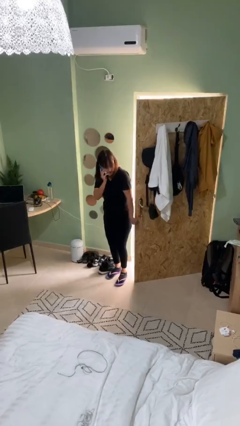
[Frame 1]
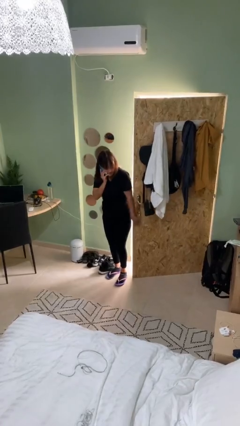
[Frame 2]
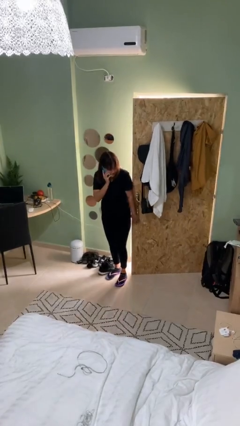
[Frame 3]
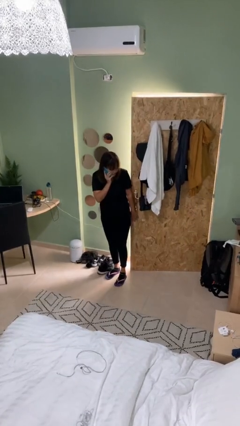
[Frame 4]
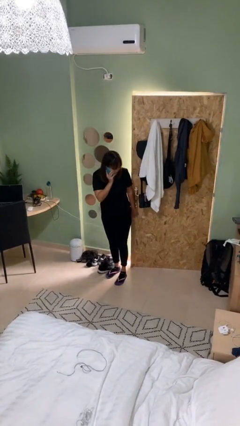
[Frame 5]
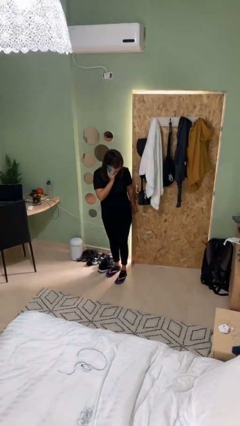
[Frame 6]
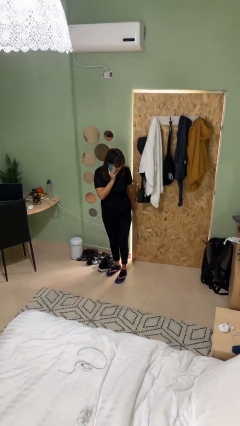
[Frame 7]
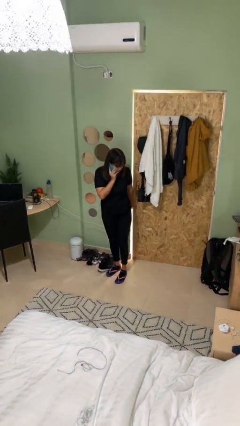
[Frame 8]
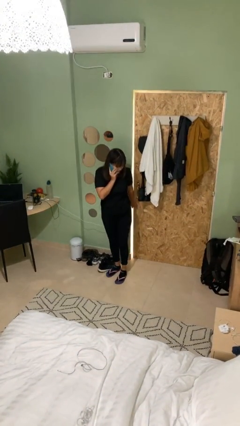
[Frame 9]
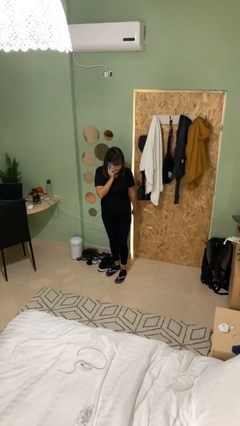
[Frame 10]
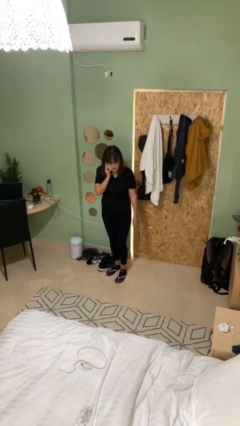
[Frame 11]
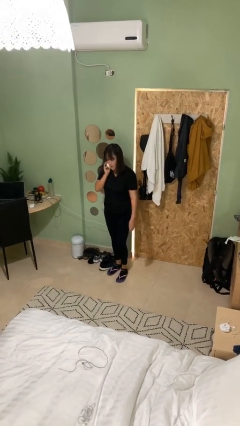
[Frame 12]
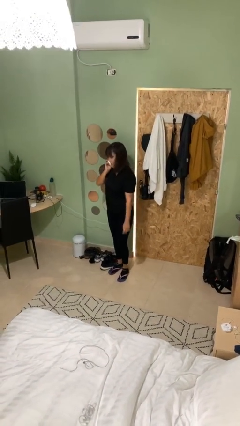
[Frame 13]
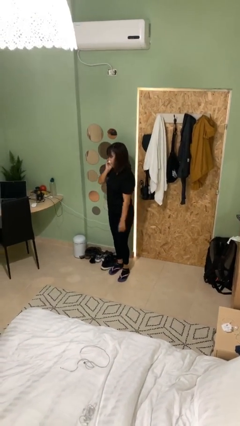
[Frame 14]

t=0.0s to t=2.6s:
person closes facility door

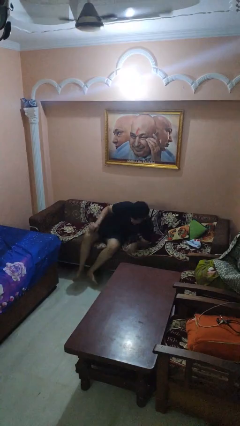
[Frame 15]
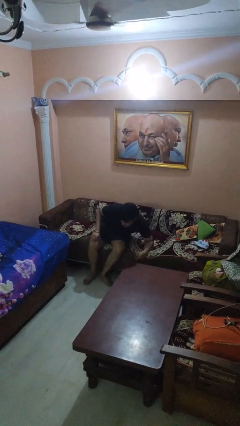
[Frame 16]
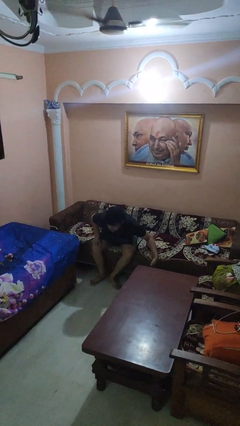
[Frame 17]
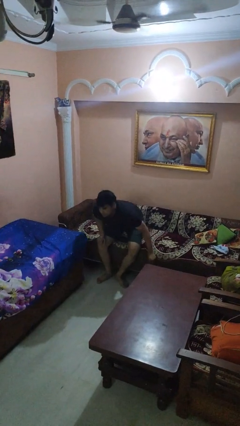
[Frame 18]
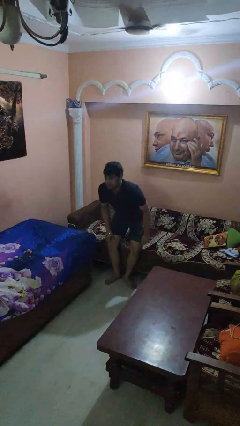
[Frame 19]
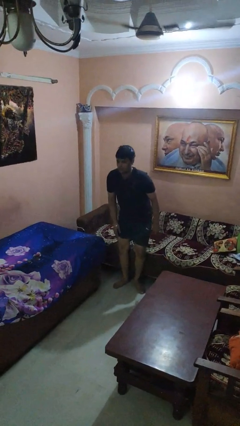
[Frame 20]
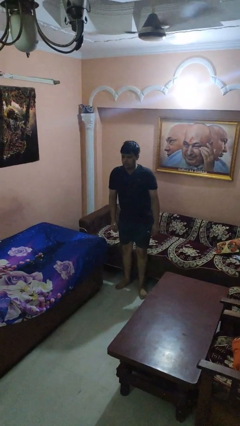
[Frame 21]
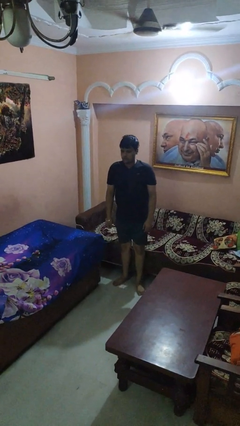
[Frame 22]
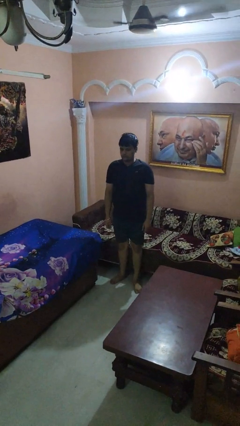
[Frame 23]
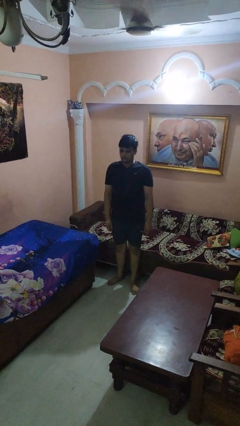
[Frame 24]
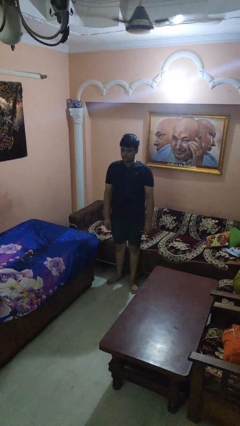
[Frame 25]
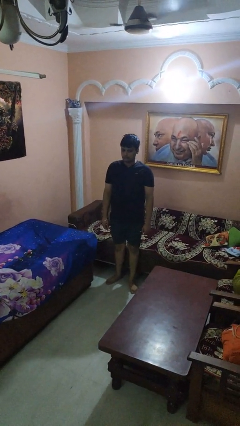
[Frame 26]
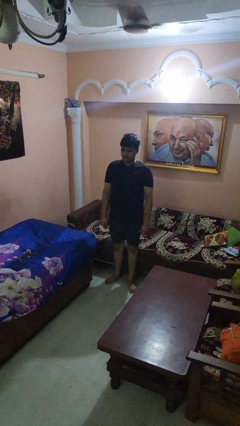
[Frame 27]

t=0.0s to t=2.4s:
person stands up

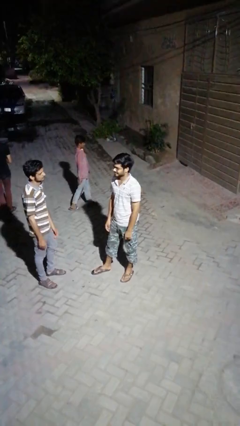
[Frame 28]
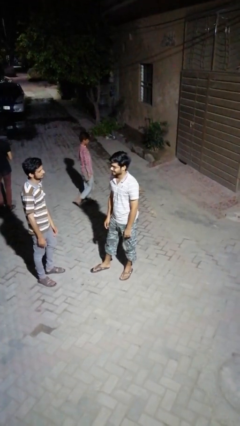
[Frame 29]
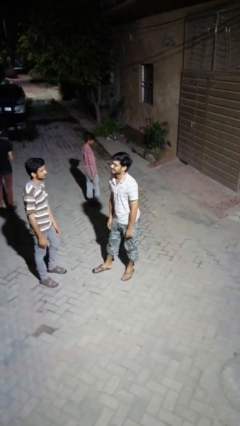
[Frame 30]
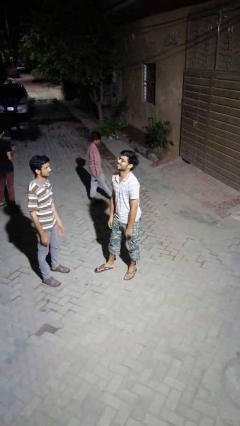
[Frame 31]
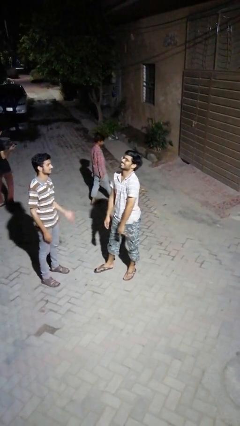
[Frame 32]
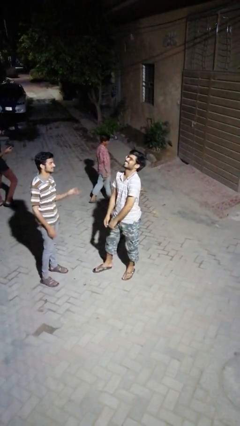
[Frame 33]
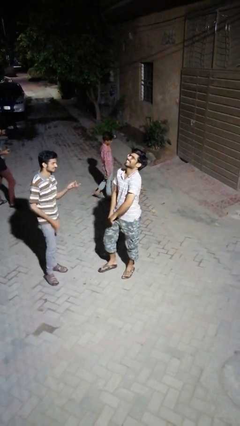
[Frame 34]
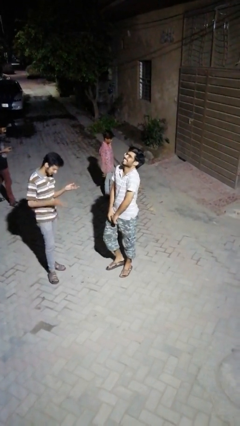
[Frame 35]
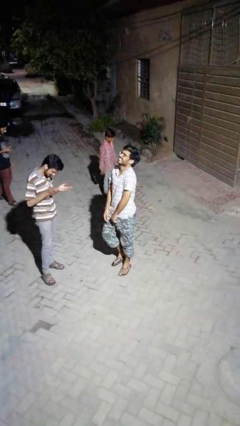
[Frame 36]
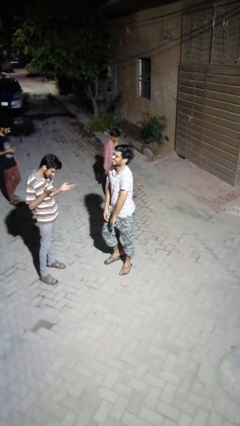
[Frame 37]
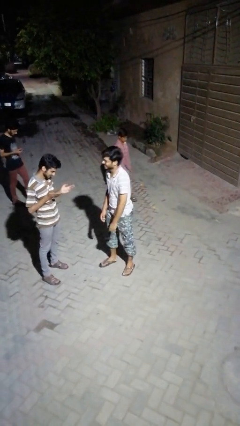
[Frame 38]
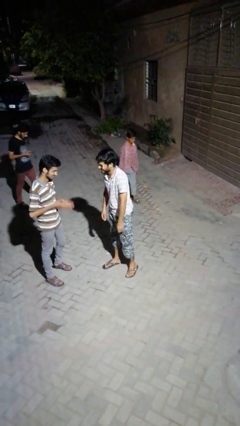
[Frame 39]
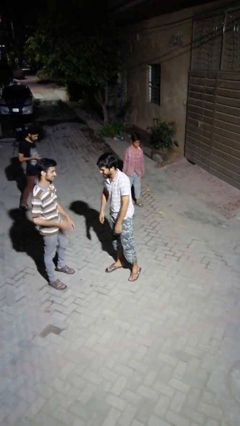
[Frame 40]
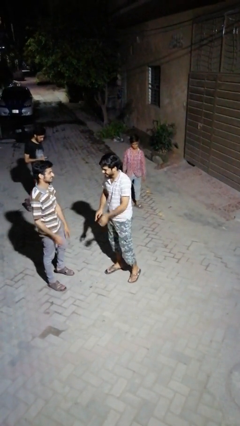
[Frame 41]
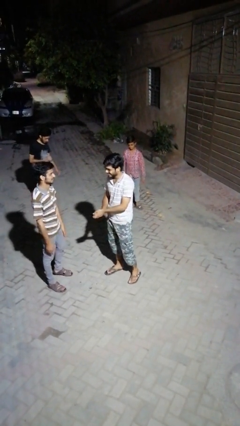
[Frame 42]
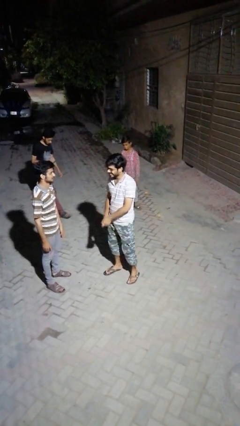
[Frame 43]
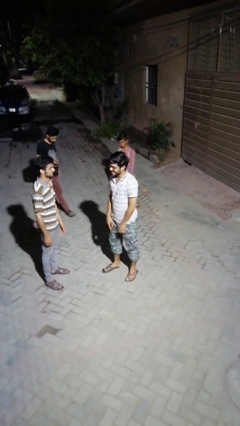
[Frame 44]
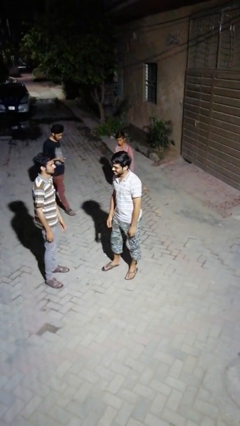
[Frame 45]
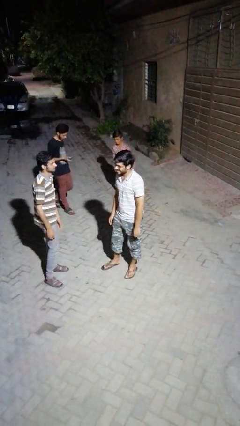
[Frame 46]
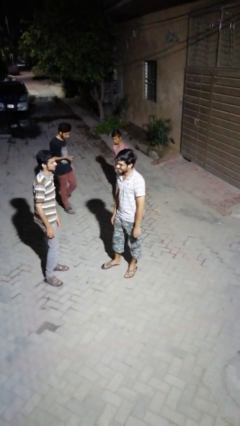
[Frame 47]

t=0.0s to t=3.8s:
person laughs with person

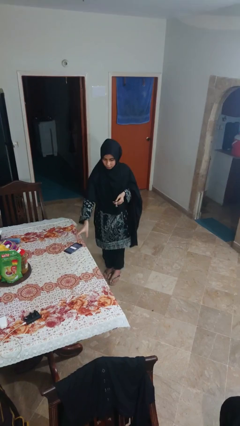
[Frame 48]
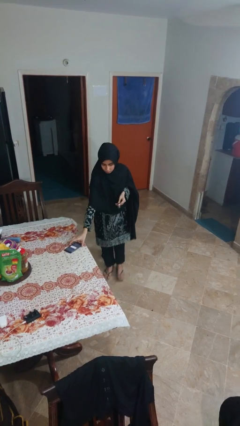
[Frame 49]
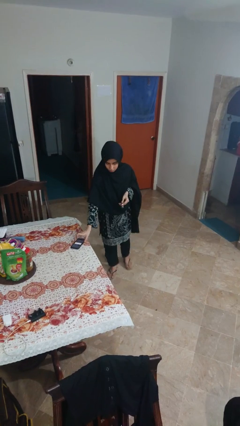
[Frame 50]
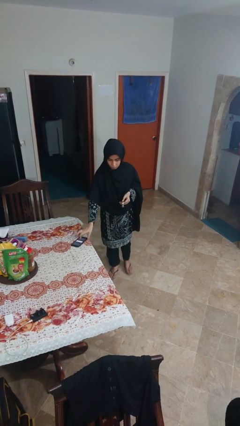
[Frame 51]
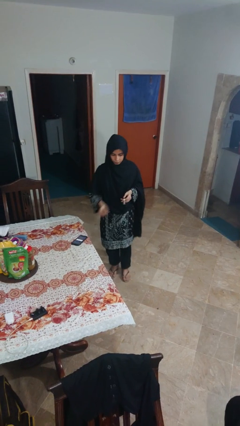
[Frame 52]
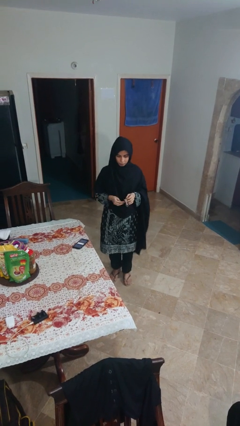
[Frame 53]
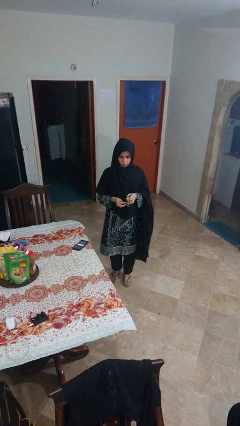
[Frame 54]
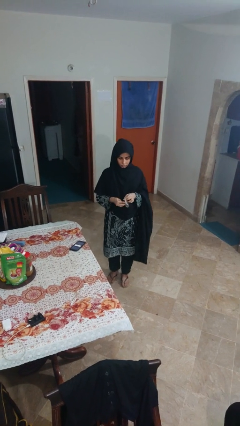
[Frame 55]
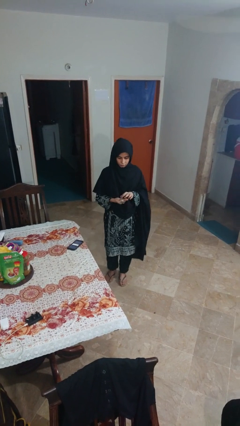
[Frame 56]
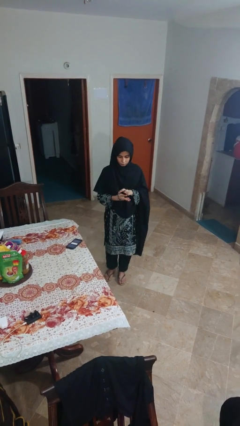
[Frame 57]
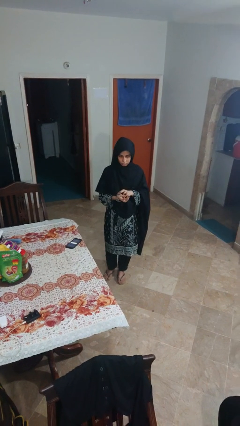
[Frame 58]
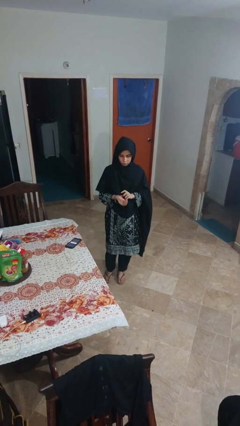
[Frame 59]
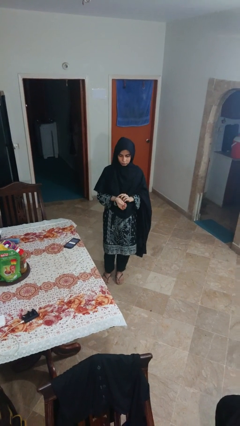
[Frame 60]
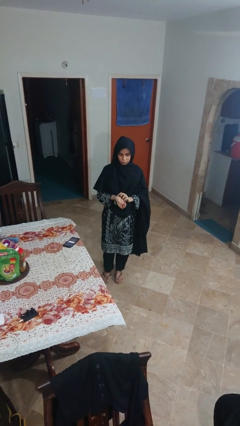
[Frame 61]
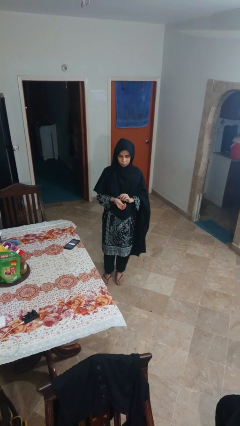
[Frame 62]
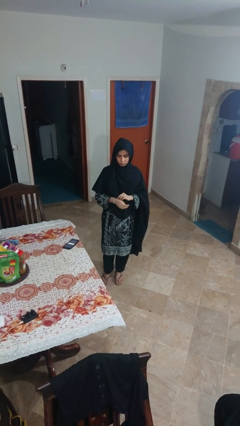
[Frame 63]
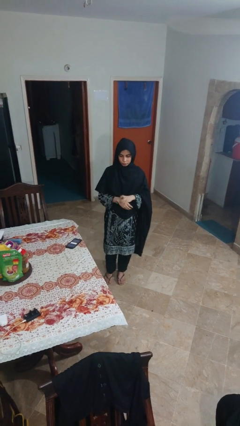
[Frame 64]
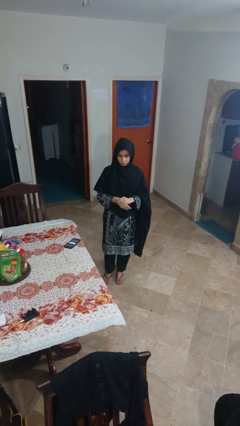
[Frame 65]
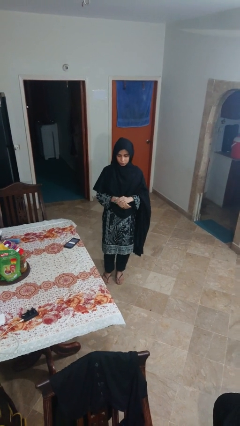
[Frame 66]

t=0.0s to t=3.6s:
person puts on wristwatch

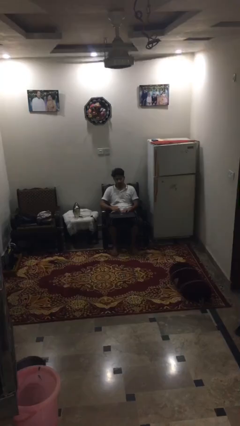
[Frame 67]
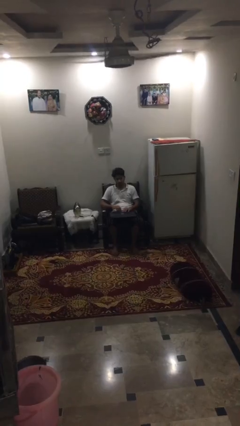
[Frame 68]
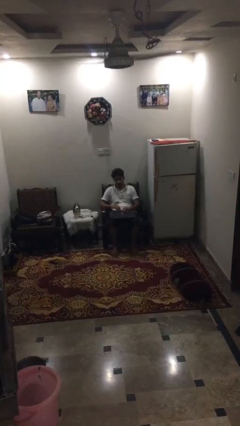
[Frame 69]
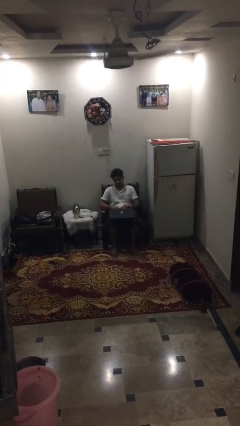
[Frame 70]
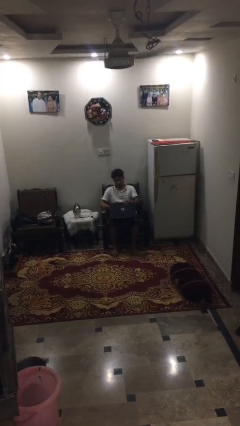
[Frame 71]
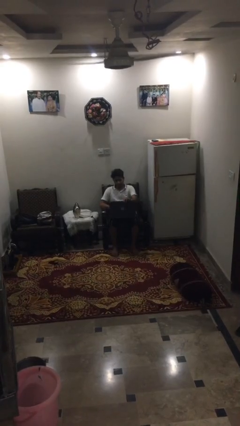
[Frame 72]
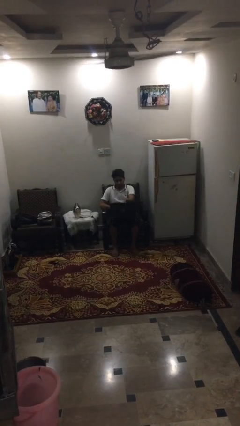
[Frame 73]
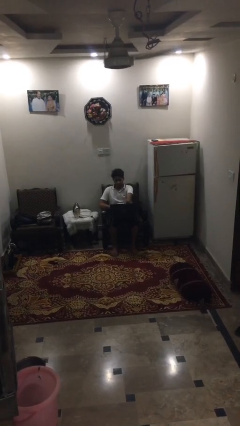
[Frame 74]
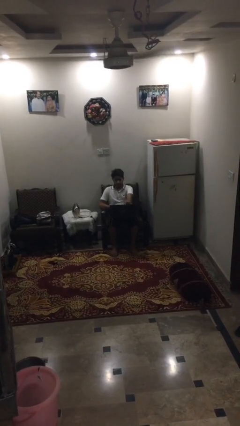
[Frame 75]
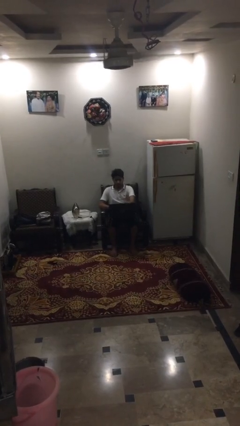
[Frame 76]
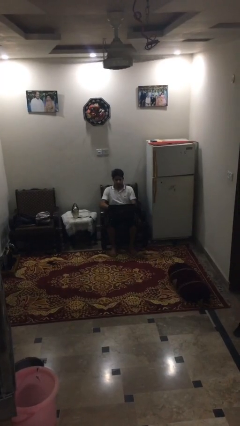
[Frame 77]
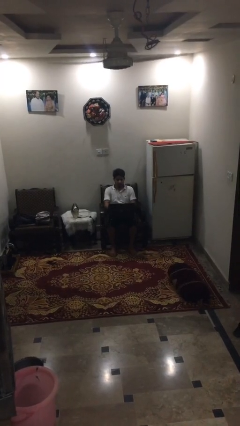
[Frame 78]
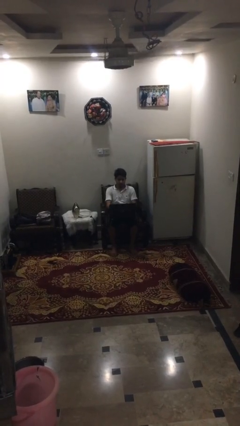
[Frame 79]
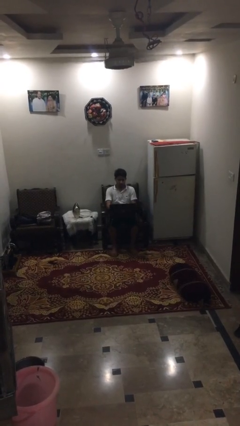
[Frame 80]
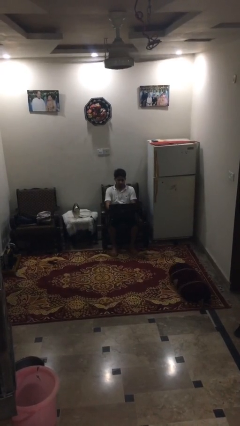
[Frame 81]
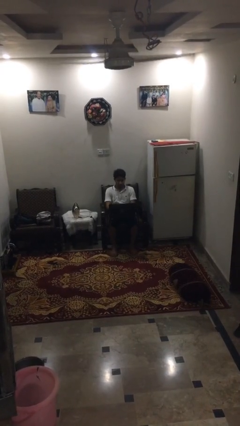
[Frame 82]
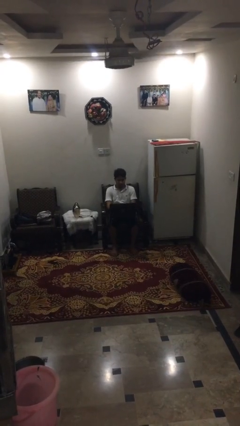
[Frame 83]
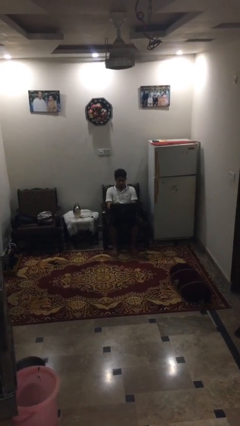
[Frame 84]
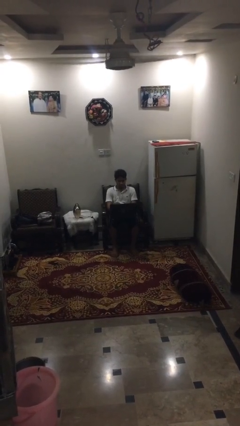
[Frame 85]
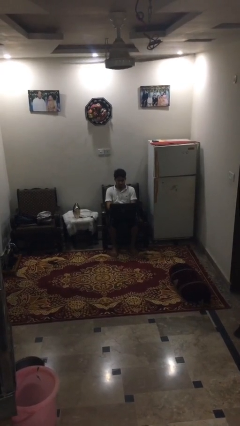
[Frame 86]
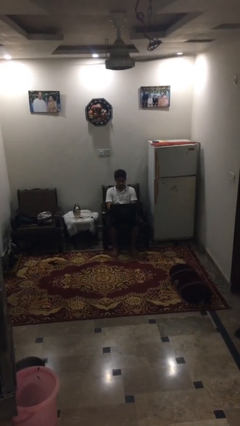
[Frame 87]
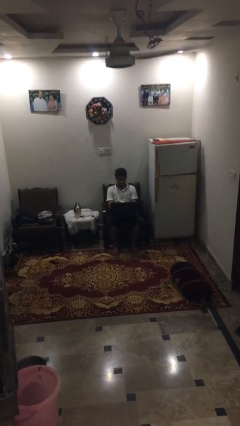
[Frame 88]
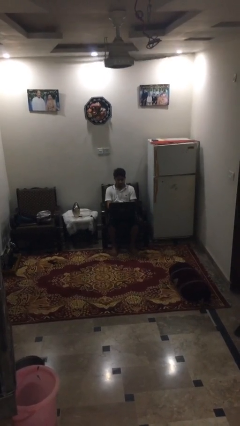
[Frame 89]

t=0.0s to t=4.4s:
person opens laptop

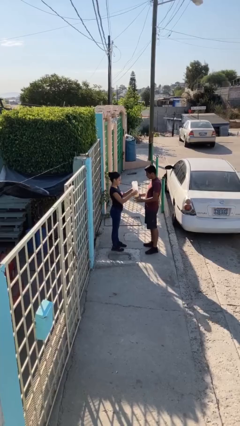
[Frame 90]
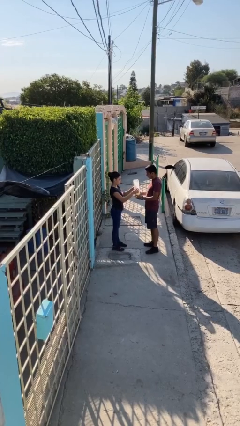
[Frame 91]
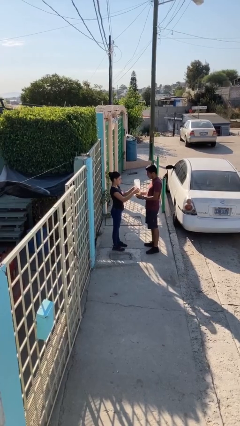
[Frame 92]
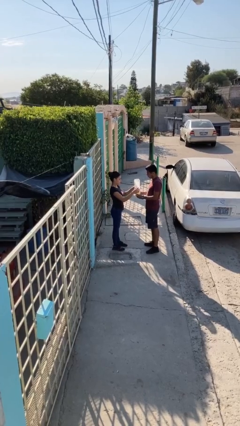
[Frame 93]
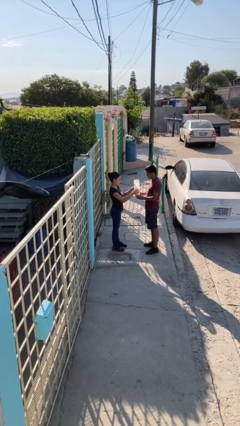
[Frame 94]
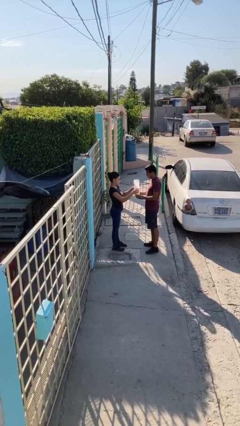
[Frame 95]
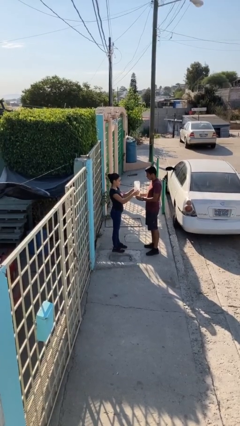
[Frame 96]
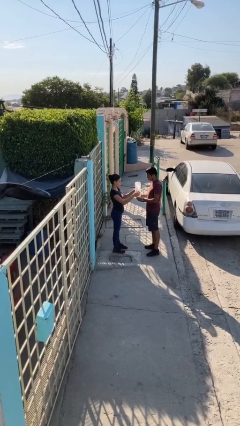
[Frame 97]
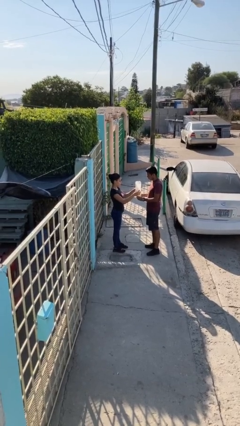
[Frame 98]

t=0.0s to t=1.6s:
person transfers object to person
